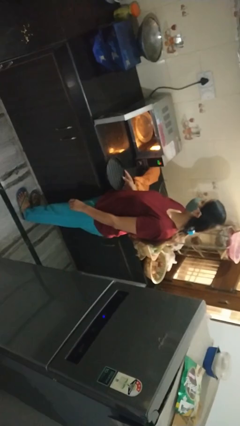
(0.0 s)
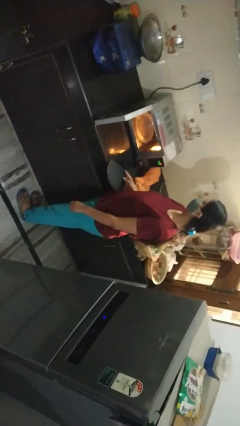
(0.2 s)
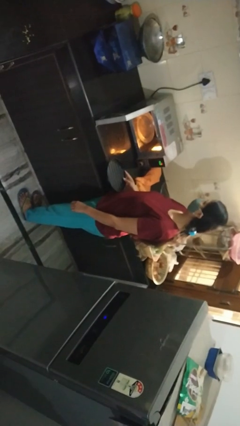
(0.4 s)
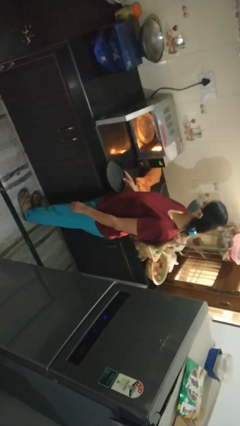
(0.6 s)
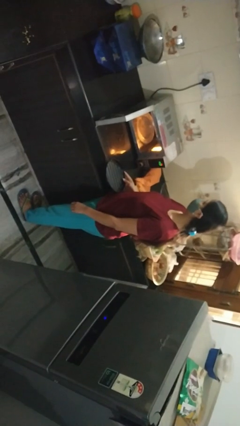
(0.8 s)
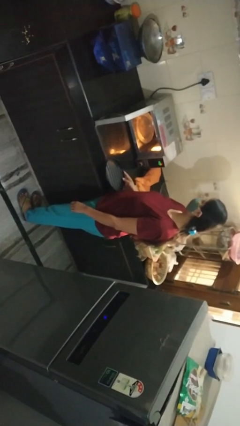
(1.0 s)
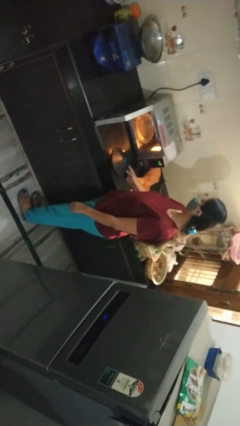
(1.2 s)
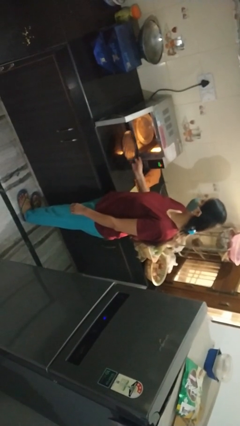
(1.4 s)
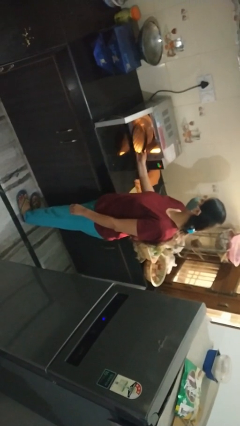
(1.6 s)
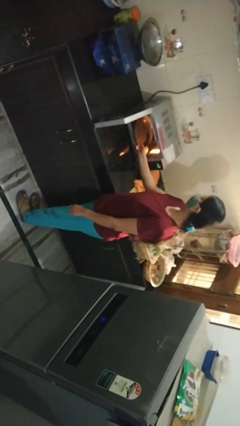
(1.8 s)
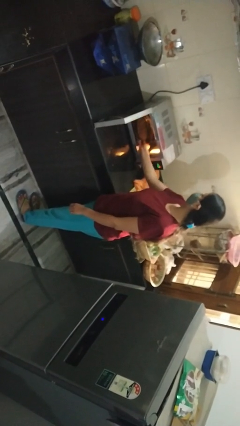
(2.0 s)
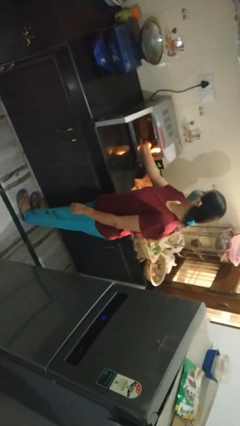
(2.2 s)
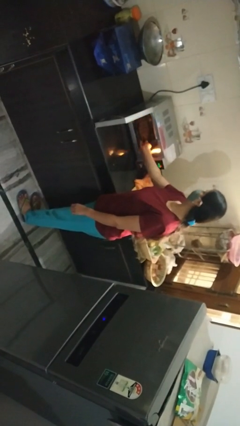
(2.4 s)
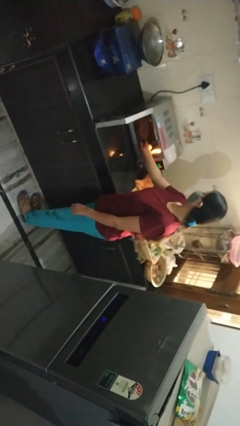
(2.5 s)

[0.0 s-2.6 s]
person puts object into microwave

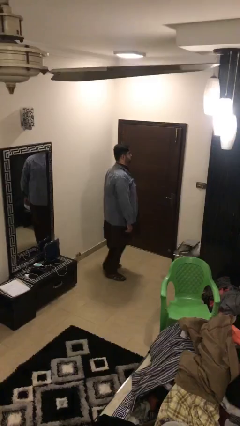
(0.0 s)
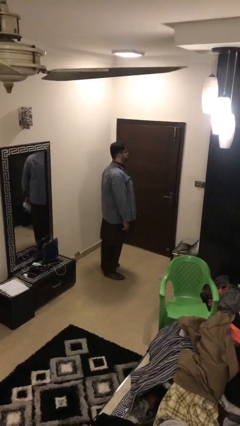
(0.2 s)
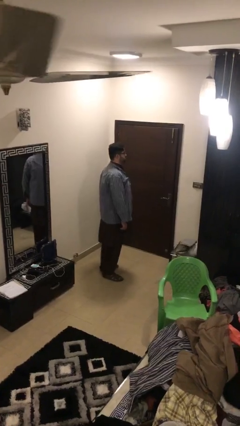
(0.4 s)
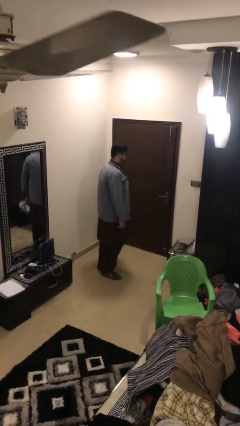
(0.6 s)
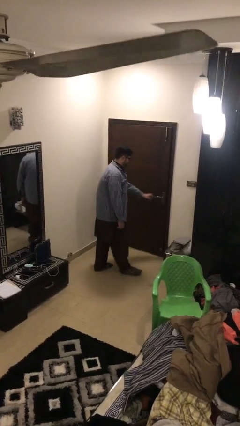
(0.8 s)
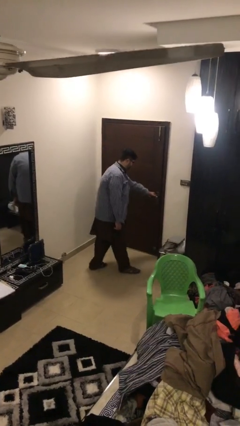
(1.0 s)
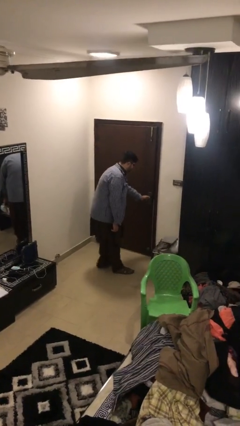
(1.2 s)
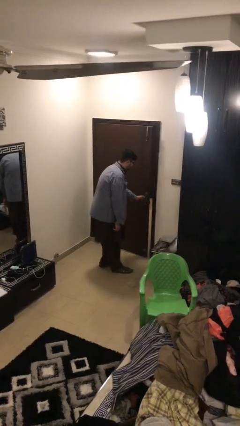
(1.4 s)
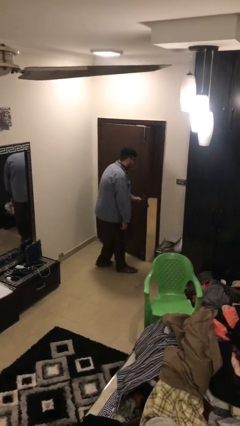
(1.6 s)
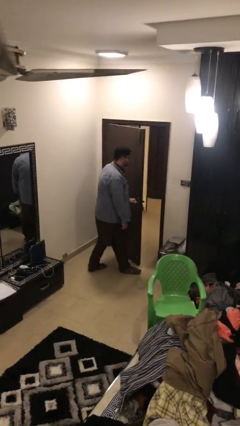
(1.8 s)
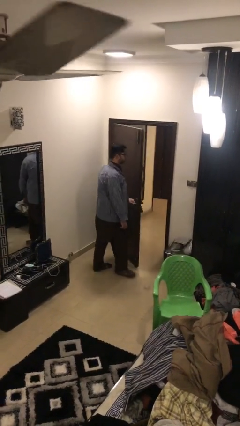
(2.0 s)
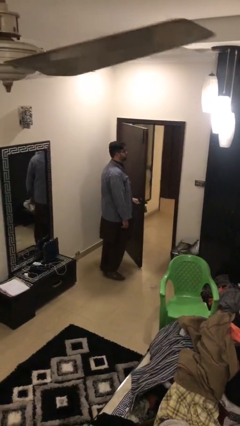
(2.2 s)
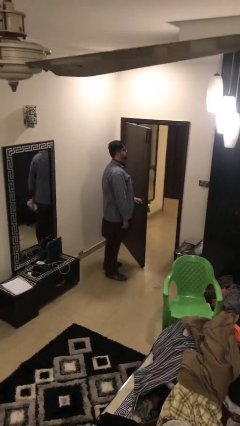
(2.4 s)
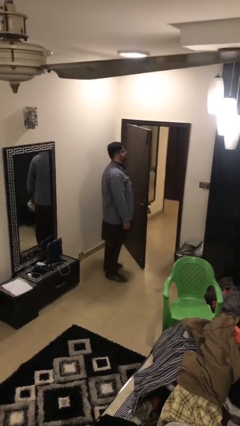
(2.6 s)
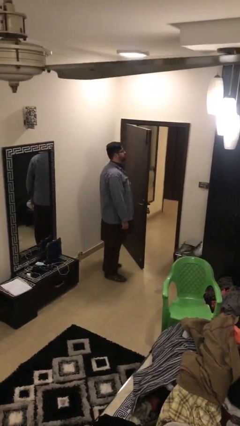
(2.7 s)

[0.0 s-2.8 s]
person opens facility door

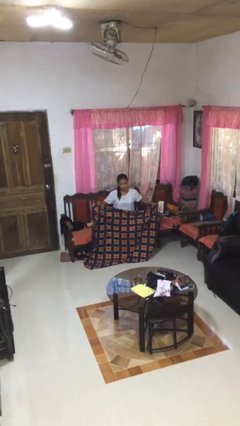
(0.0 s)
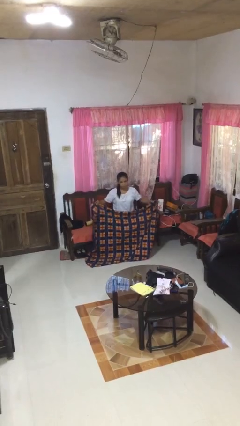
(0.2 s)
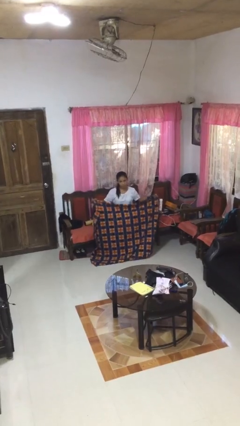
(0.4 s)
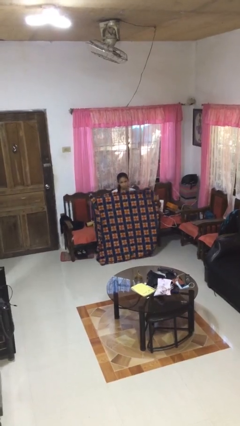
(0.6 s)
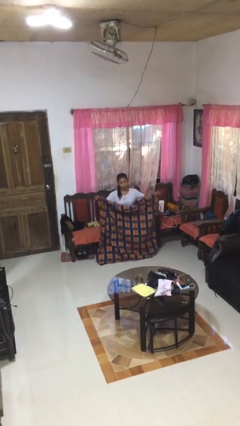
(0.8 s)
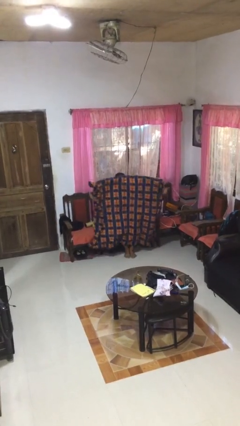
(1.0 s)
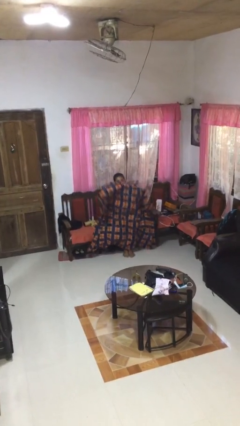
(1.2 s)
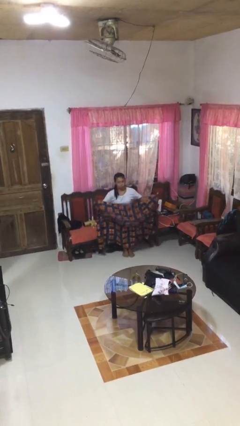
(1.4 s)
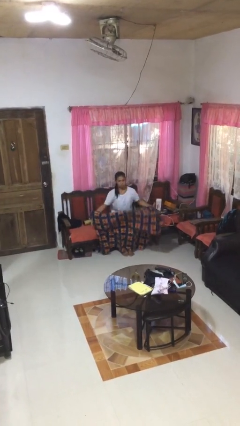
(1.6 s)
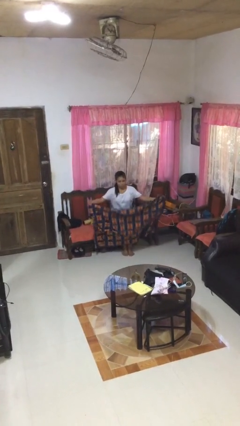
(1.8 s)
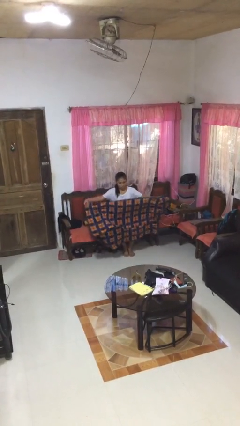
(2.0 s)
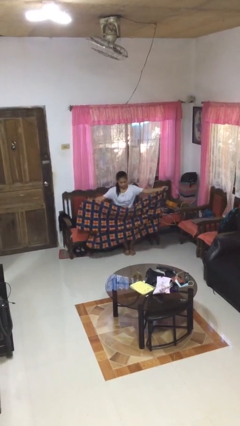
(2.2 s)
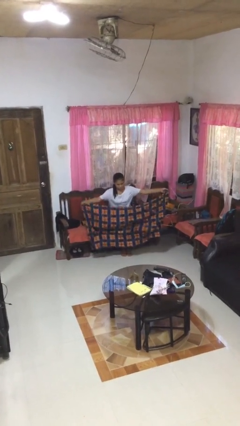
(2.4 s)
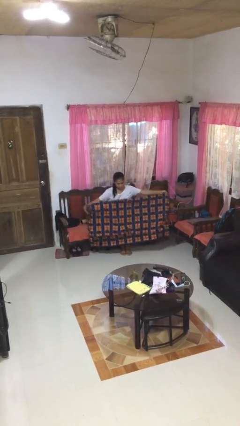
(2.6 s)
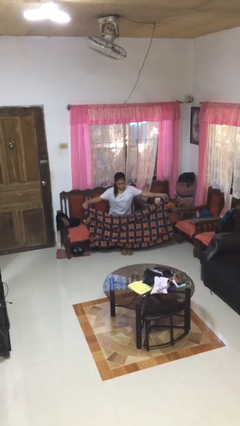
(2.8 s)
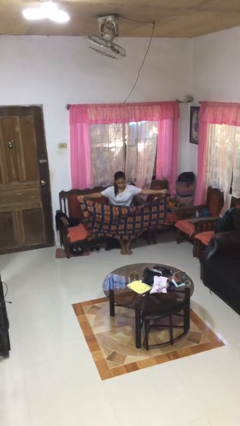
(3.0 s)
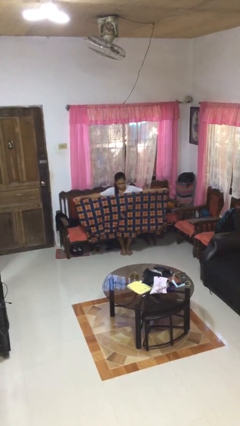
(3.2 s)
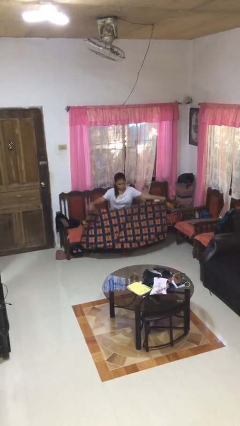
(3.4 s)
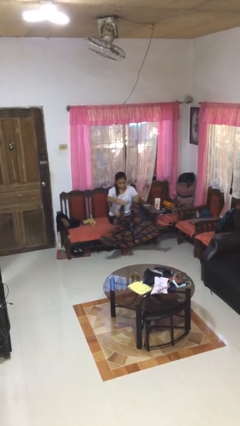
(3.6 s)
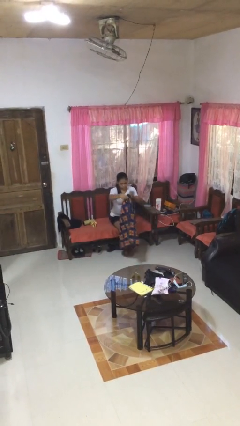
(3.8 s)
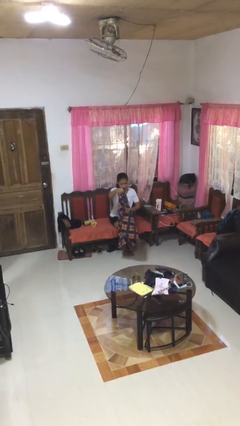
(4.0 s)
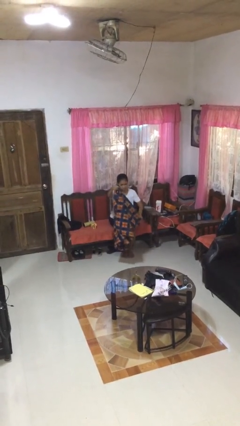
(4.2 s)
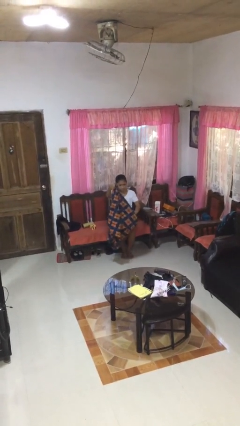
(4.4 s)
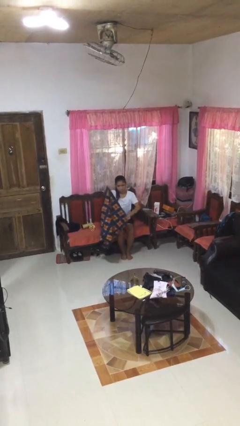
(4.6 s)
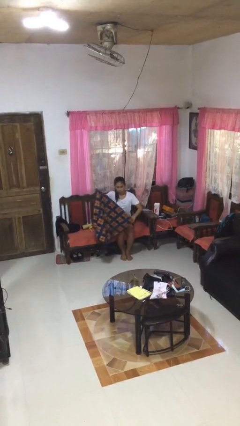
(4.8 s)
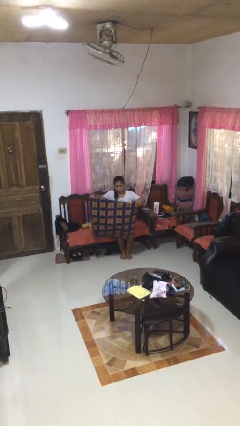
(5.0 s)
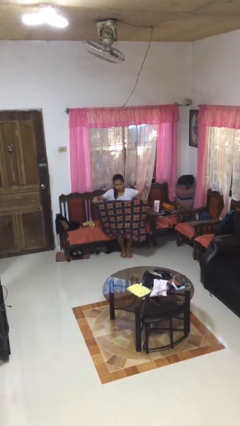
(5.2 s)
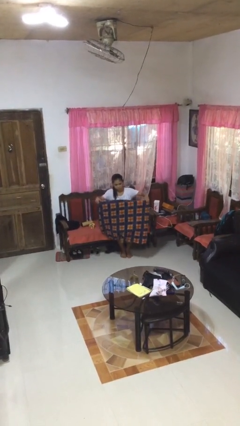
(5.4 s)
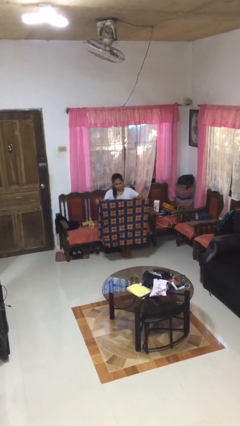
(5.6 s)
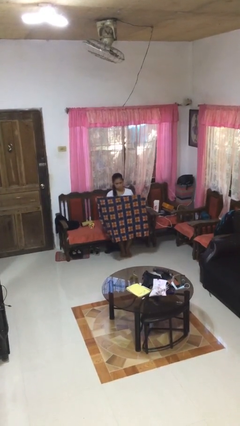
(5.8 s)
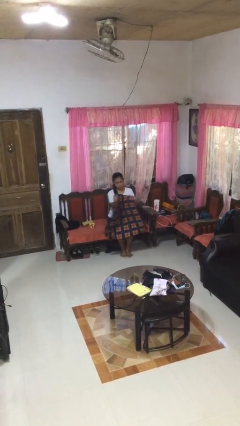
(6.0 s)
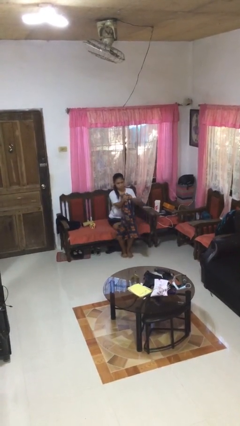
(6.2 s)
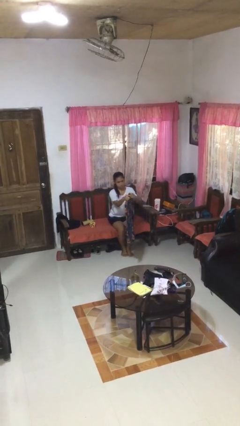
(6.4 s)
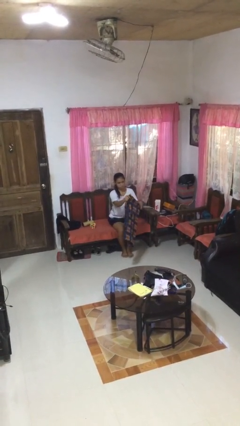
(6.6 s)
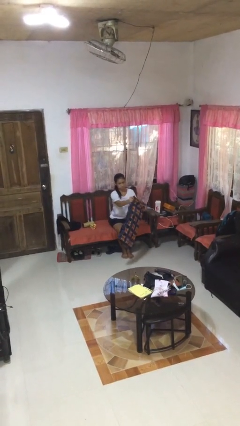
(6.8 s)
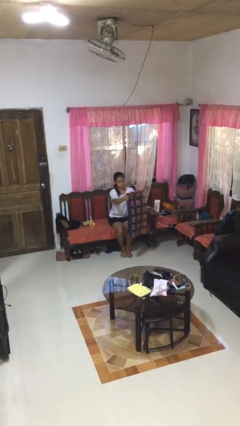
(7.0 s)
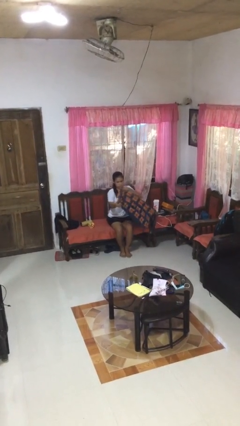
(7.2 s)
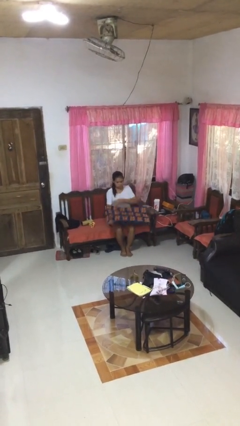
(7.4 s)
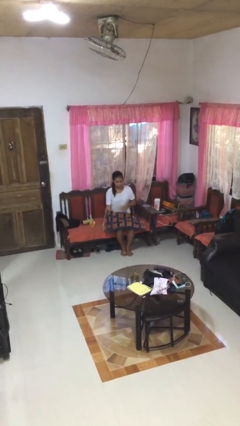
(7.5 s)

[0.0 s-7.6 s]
person folds blanket

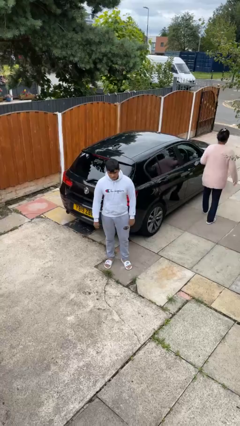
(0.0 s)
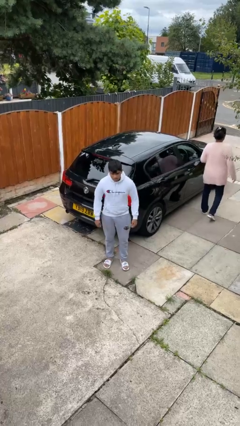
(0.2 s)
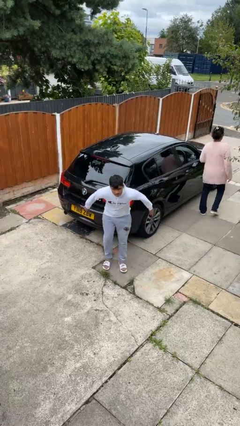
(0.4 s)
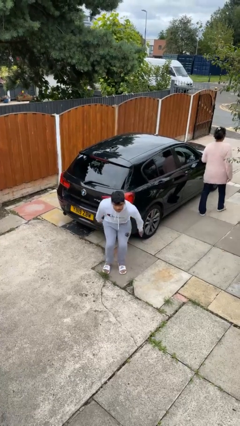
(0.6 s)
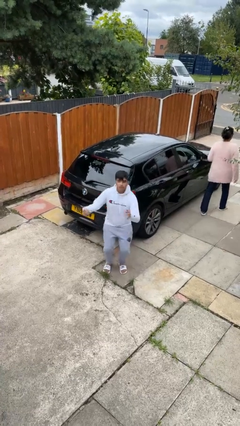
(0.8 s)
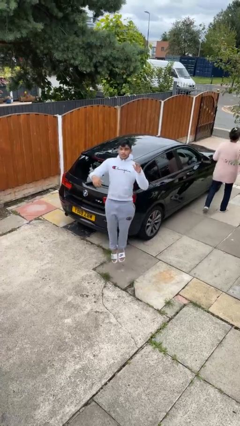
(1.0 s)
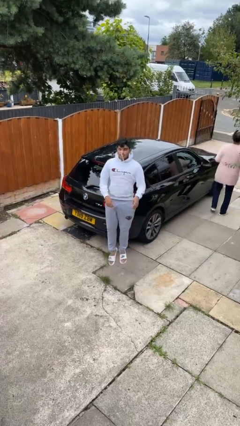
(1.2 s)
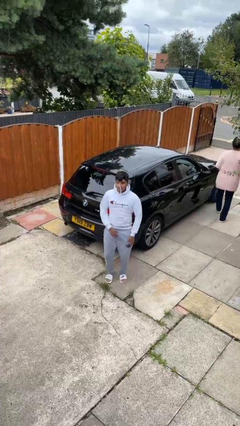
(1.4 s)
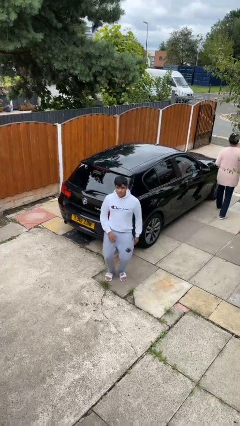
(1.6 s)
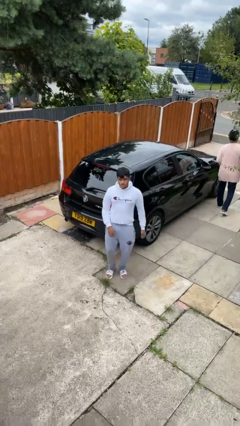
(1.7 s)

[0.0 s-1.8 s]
person jumps

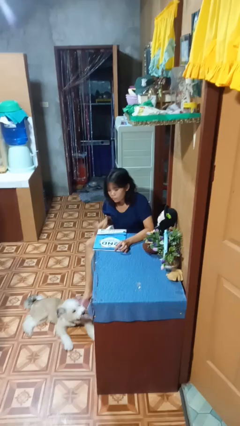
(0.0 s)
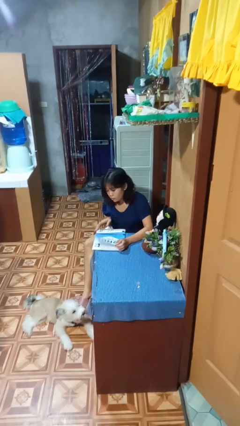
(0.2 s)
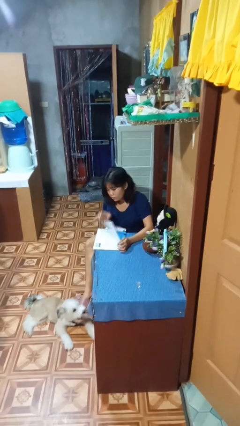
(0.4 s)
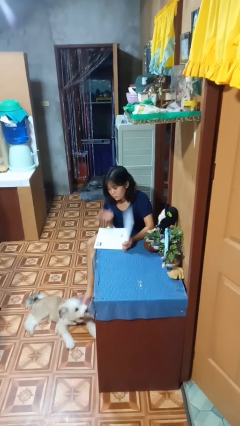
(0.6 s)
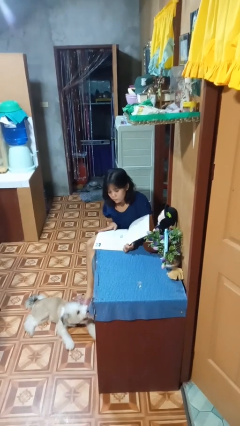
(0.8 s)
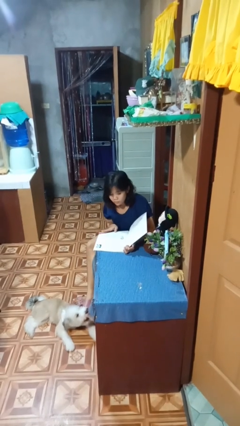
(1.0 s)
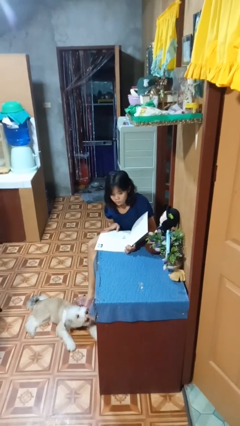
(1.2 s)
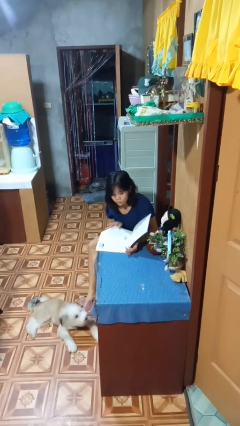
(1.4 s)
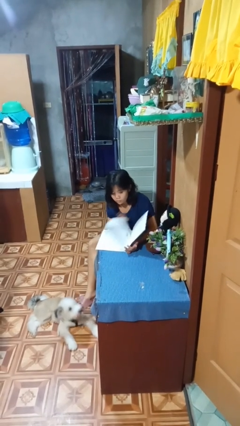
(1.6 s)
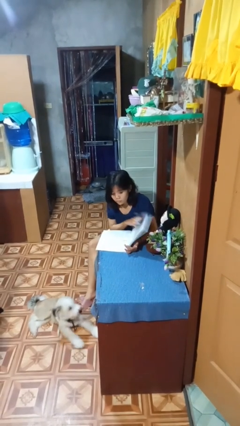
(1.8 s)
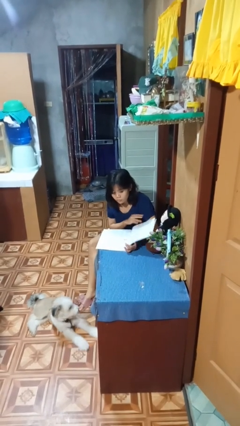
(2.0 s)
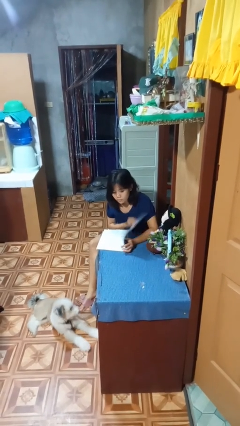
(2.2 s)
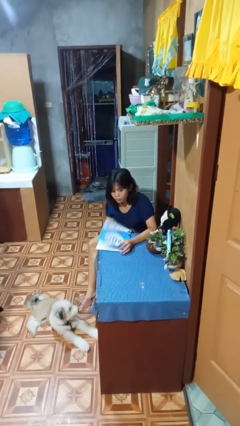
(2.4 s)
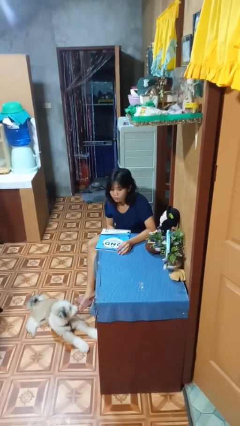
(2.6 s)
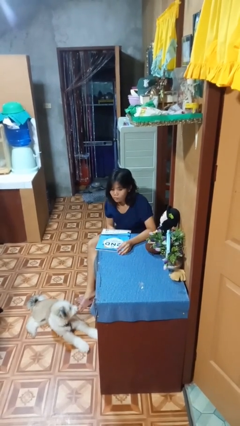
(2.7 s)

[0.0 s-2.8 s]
person reads magazine

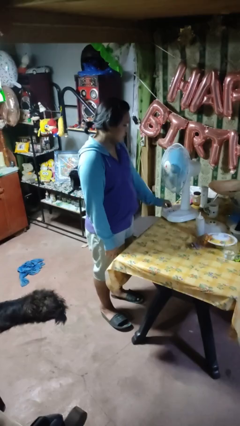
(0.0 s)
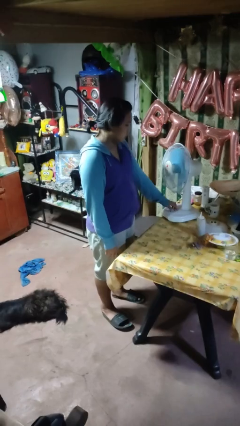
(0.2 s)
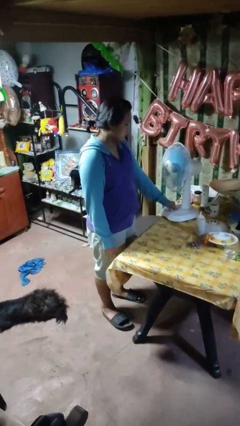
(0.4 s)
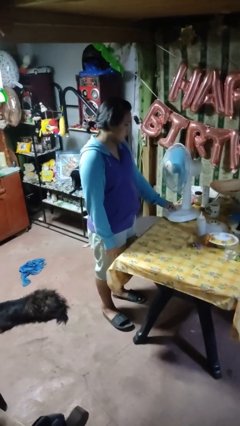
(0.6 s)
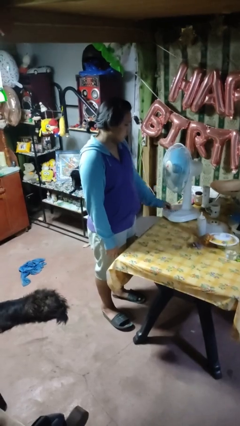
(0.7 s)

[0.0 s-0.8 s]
person turns off fan
